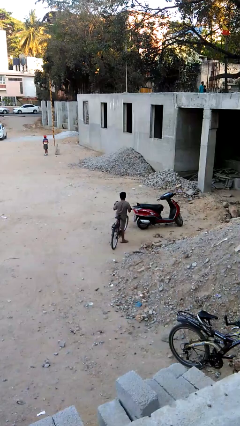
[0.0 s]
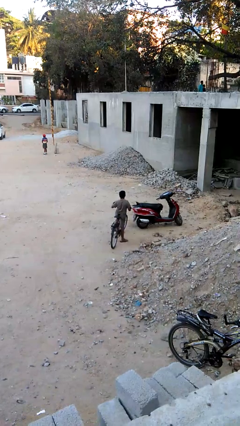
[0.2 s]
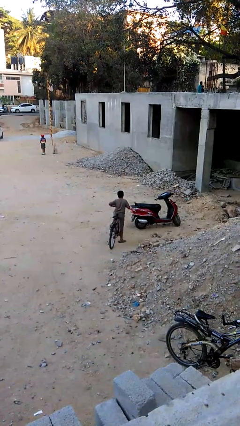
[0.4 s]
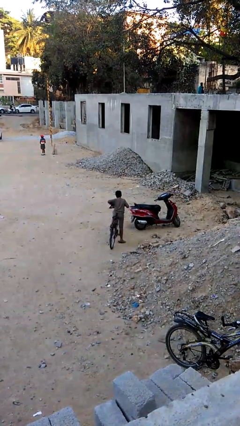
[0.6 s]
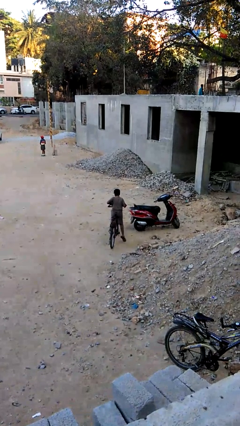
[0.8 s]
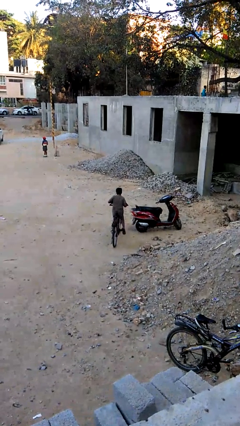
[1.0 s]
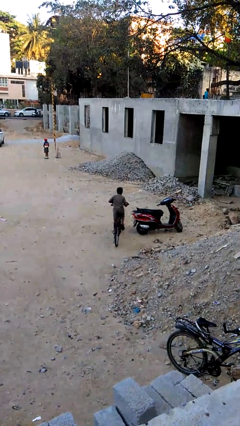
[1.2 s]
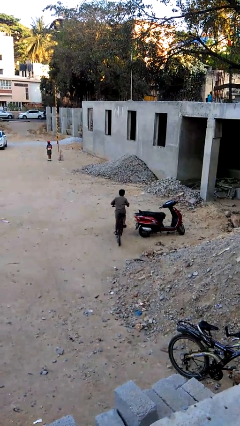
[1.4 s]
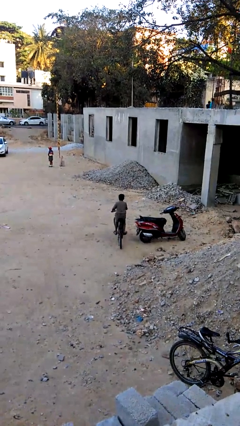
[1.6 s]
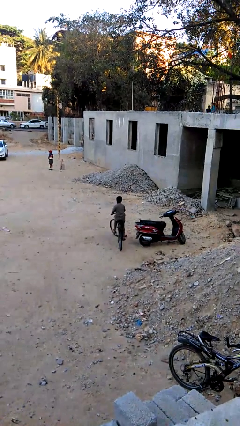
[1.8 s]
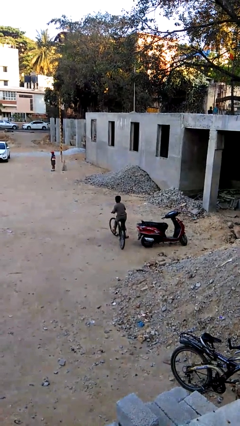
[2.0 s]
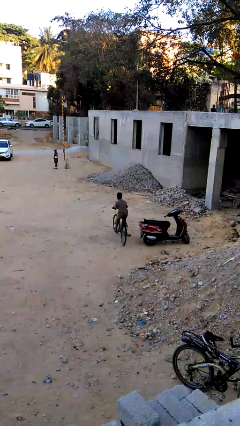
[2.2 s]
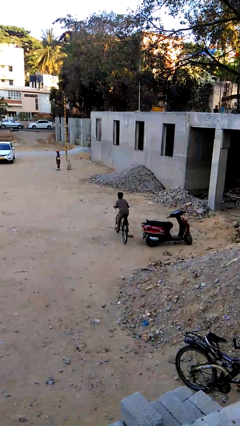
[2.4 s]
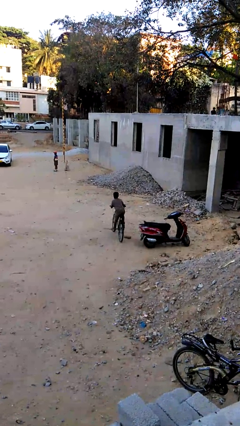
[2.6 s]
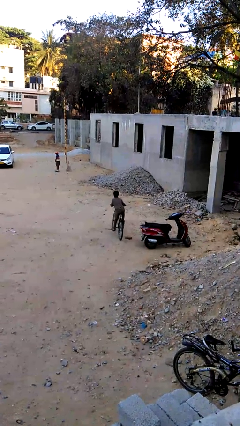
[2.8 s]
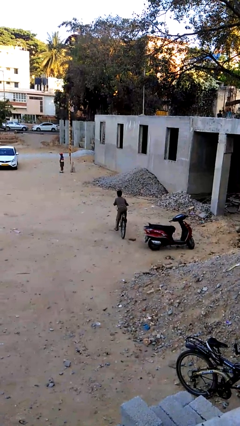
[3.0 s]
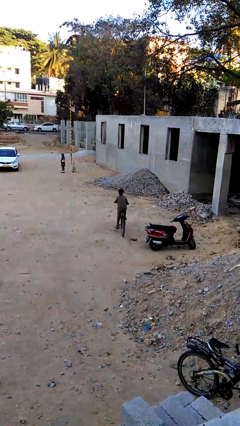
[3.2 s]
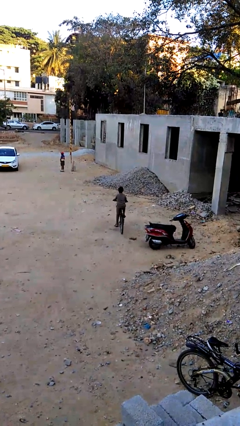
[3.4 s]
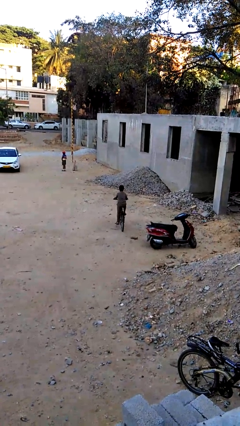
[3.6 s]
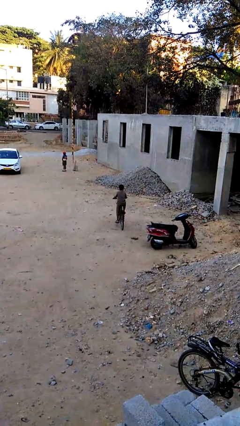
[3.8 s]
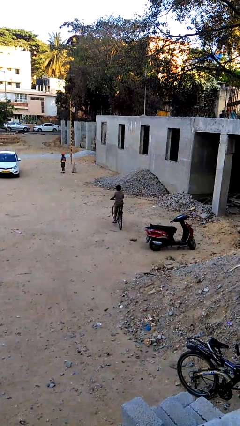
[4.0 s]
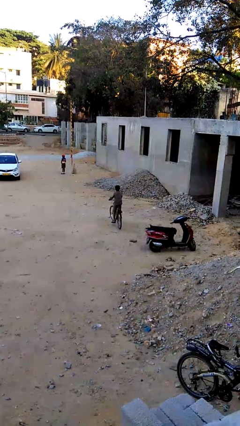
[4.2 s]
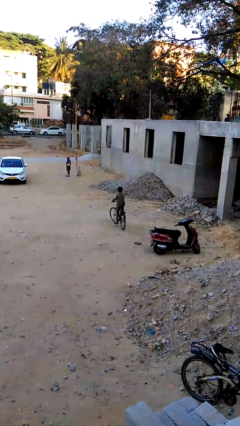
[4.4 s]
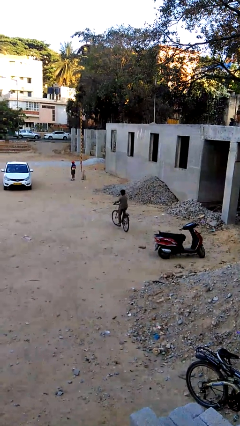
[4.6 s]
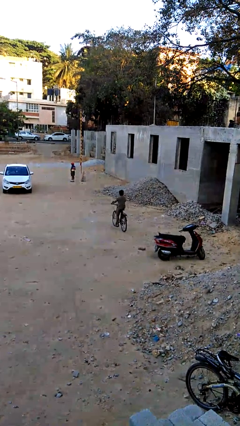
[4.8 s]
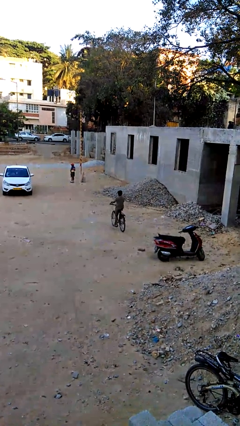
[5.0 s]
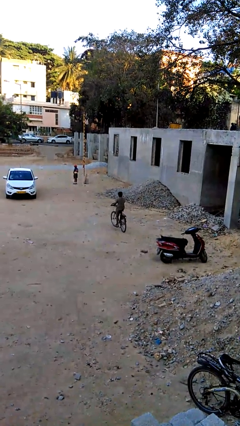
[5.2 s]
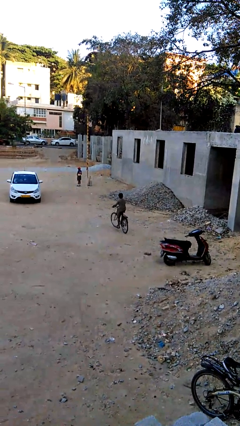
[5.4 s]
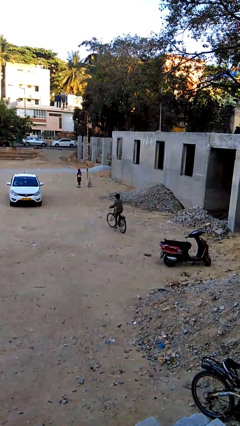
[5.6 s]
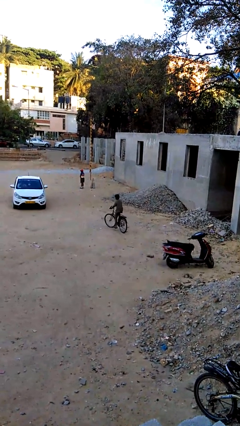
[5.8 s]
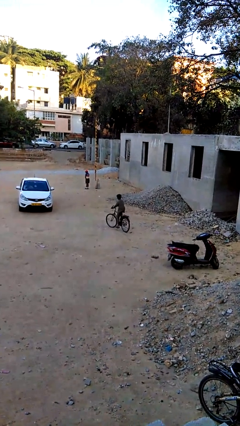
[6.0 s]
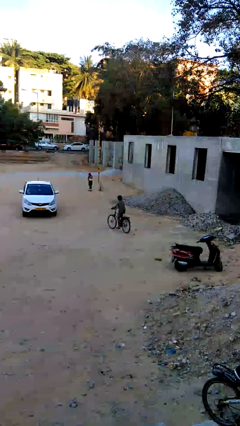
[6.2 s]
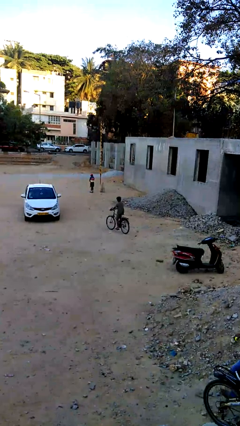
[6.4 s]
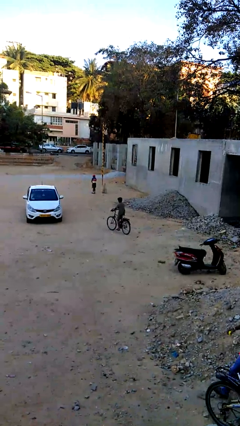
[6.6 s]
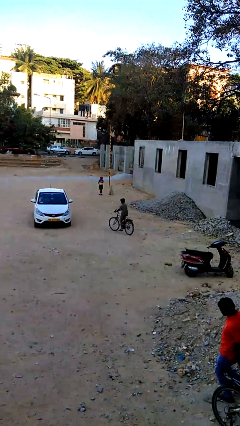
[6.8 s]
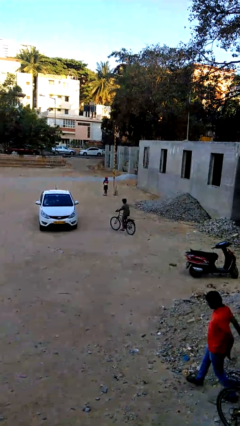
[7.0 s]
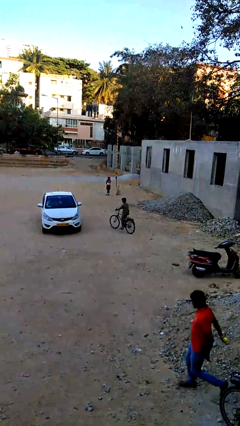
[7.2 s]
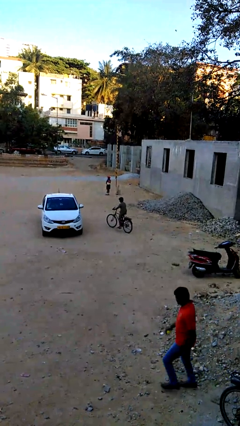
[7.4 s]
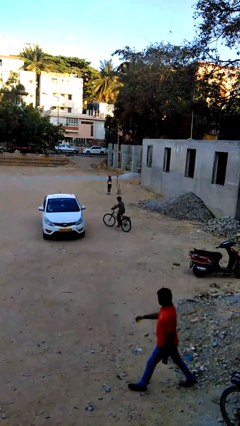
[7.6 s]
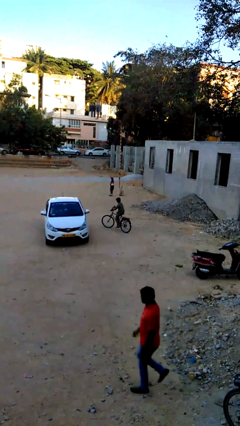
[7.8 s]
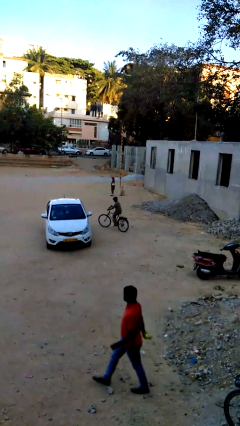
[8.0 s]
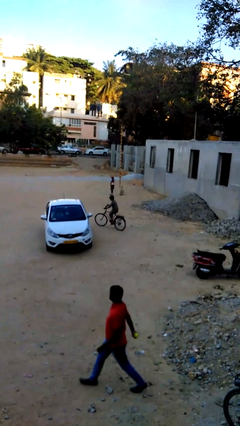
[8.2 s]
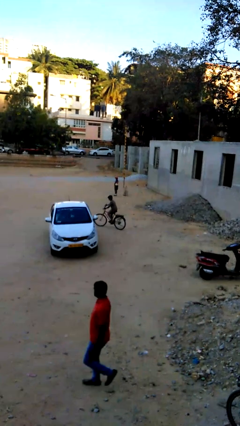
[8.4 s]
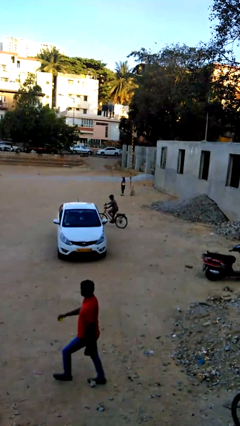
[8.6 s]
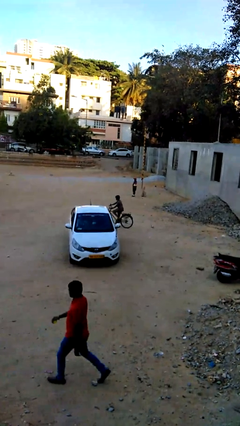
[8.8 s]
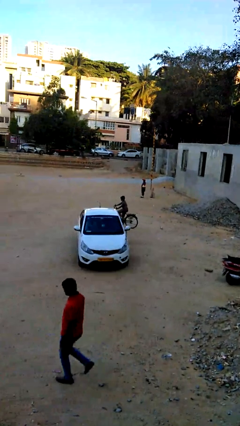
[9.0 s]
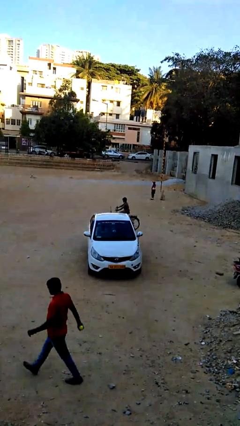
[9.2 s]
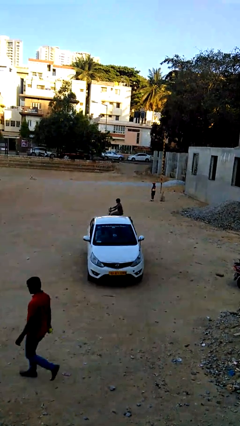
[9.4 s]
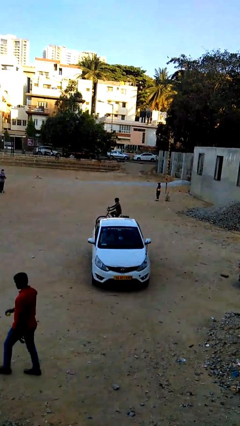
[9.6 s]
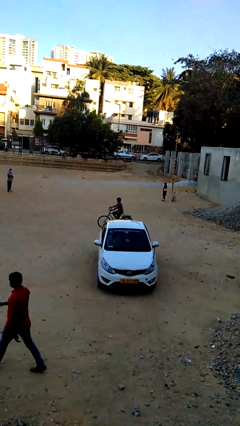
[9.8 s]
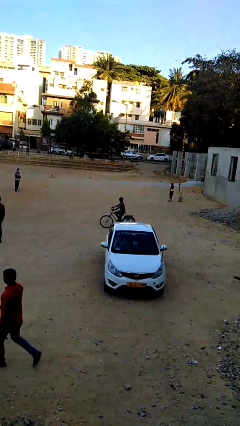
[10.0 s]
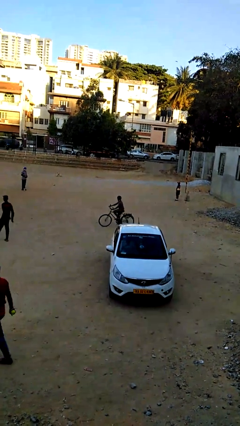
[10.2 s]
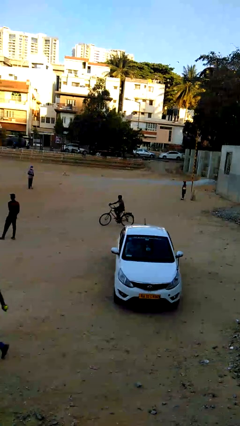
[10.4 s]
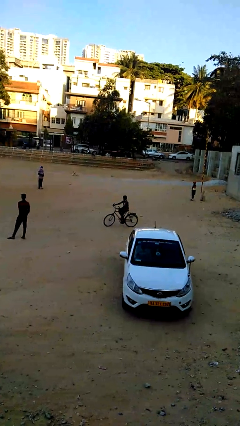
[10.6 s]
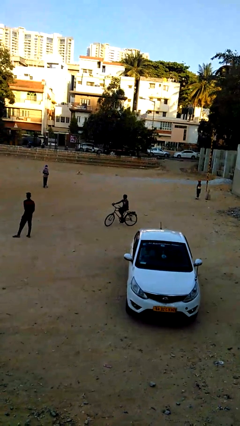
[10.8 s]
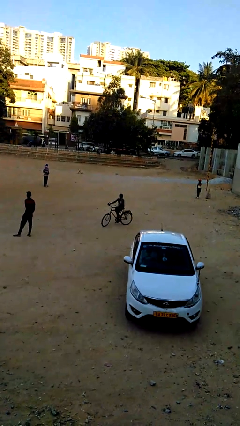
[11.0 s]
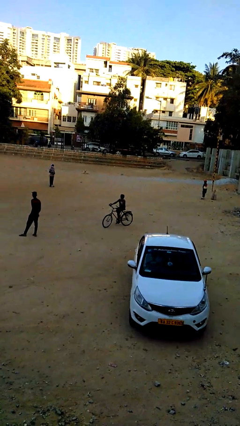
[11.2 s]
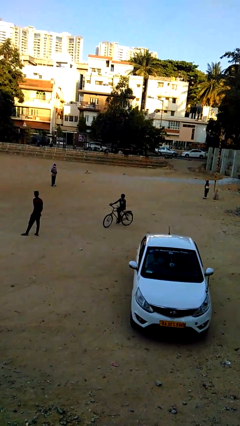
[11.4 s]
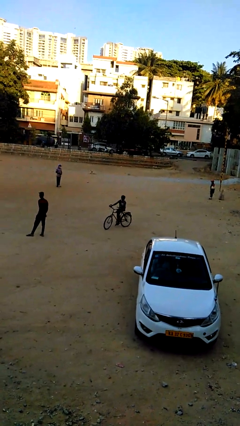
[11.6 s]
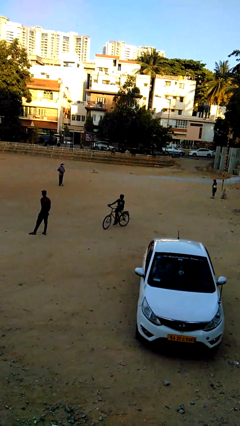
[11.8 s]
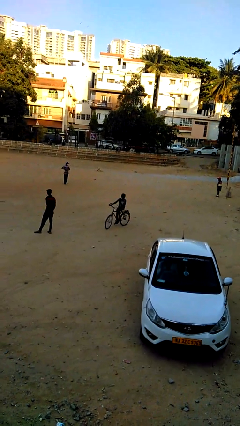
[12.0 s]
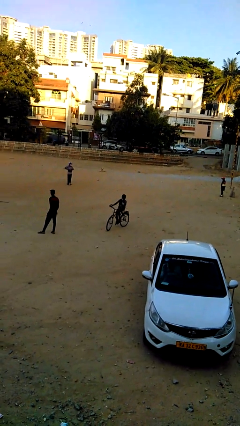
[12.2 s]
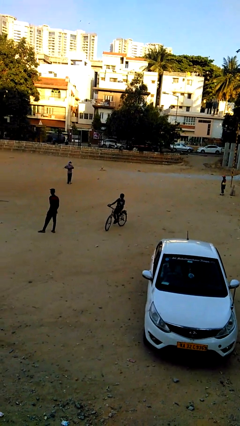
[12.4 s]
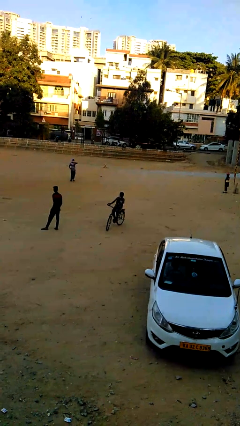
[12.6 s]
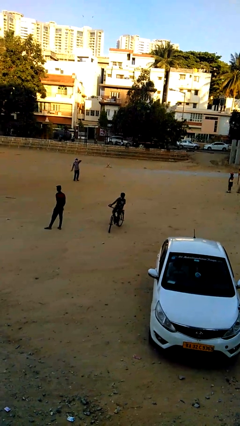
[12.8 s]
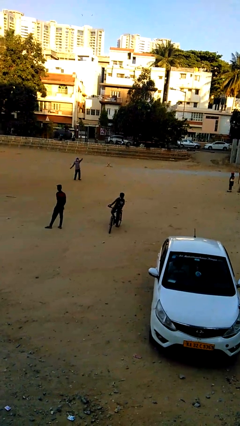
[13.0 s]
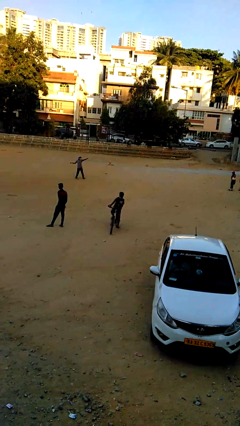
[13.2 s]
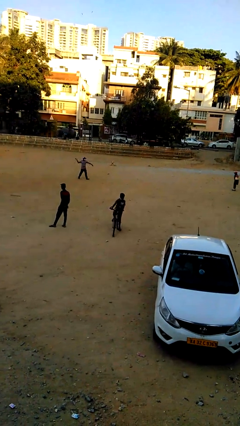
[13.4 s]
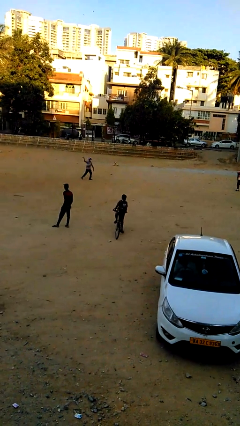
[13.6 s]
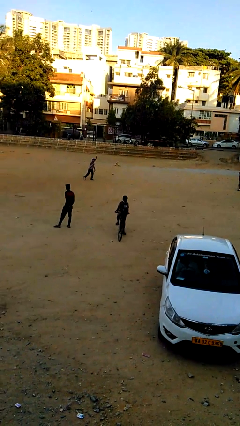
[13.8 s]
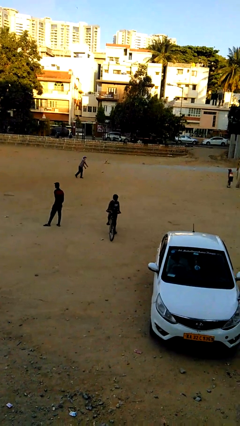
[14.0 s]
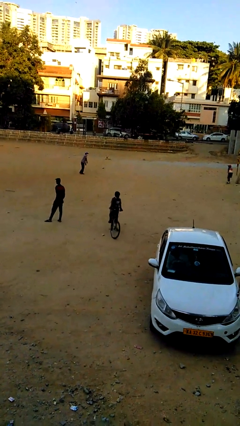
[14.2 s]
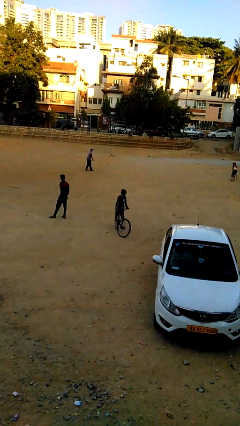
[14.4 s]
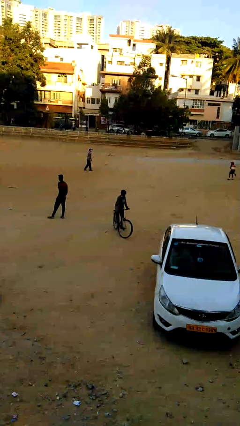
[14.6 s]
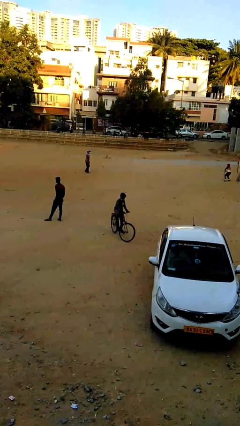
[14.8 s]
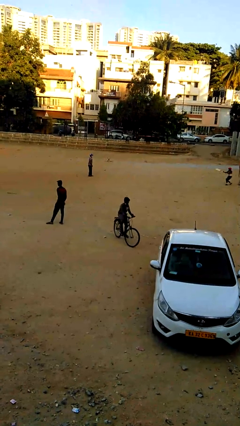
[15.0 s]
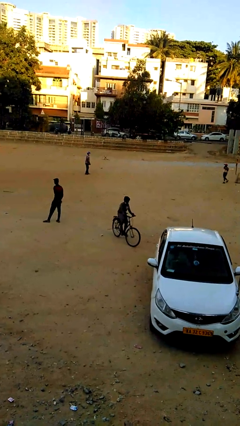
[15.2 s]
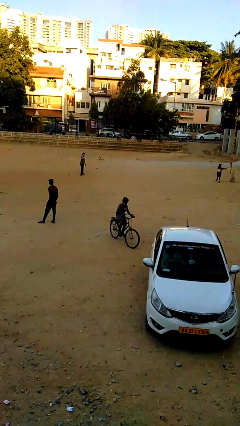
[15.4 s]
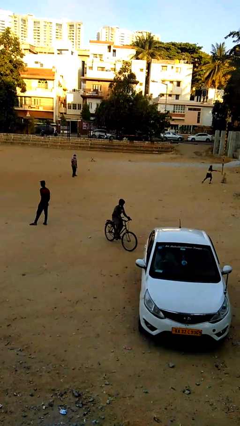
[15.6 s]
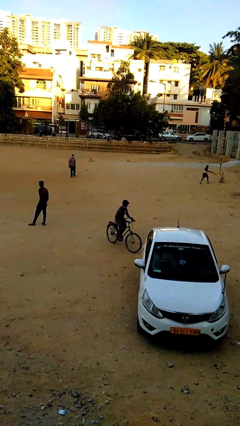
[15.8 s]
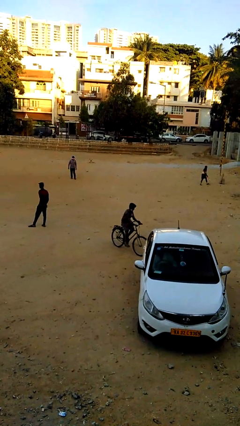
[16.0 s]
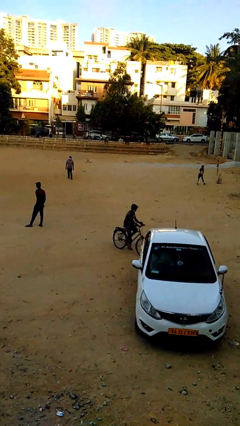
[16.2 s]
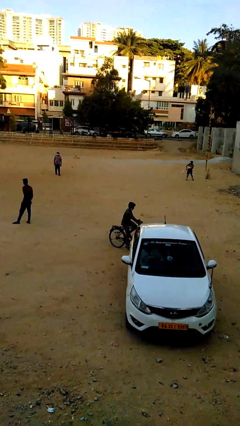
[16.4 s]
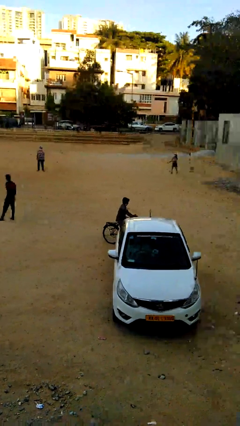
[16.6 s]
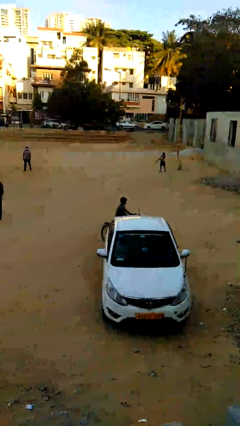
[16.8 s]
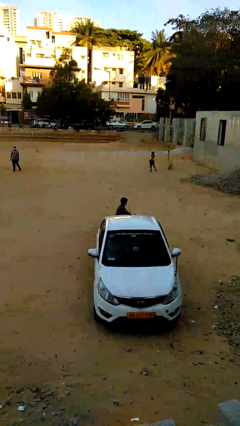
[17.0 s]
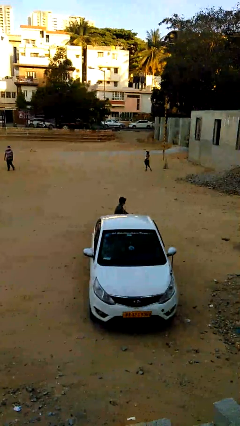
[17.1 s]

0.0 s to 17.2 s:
person rides bicycle

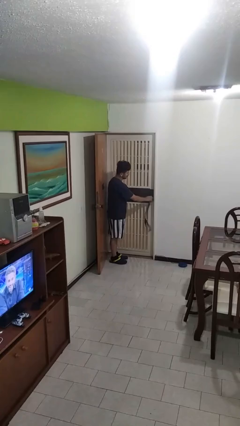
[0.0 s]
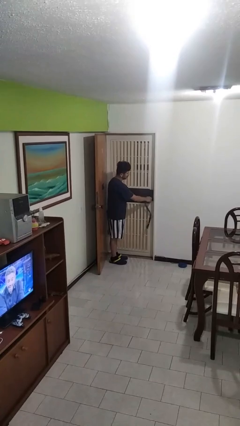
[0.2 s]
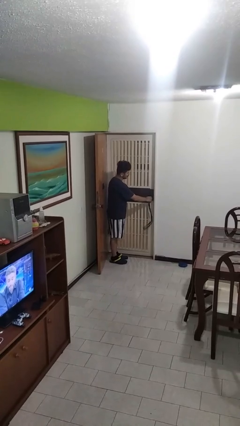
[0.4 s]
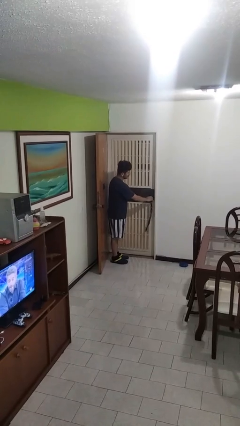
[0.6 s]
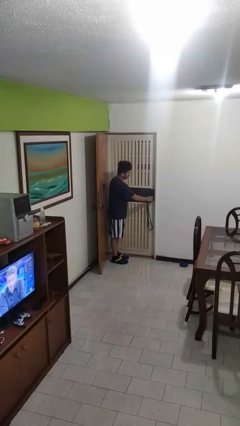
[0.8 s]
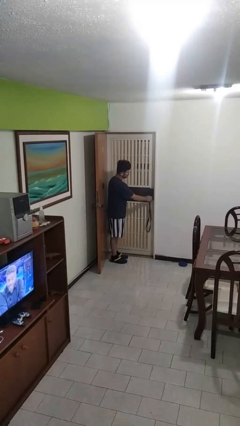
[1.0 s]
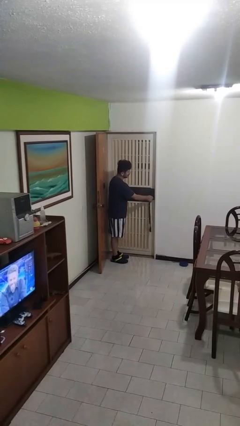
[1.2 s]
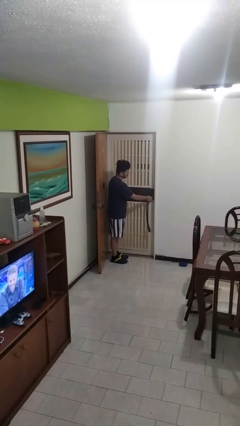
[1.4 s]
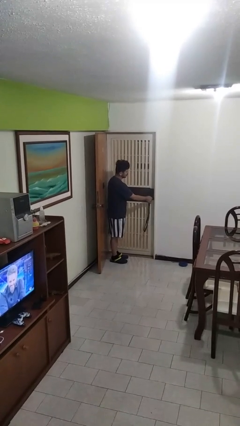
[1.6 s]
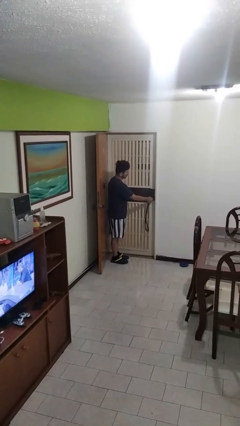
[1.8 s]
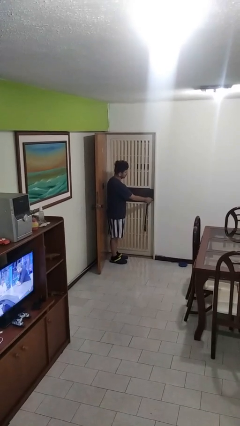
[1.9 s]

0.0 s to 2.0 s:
person locks door with keys
